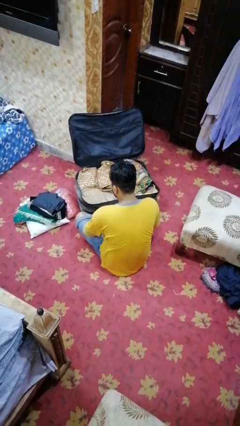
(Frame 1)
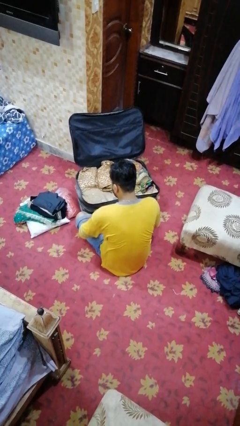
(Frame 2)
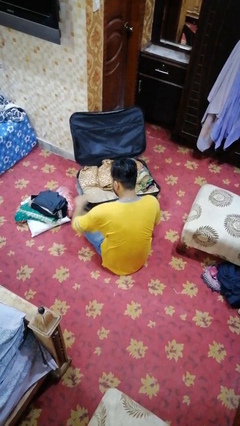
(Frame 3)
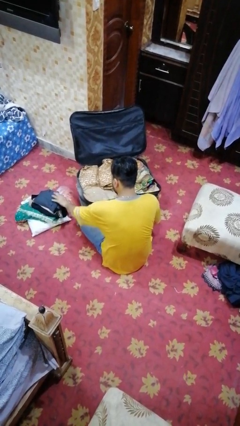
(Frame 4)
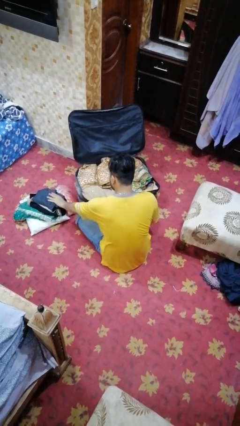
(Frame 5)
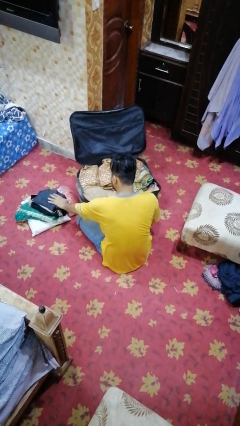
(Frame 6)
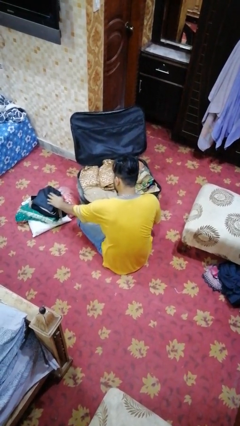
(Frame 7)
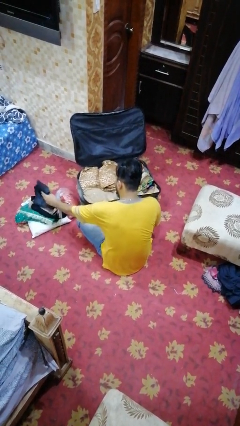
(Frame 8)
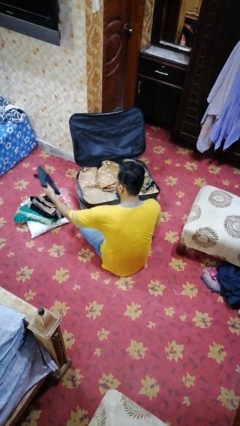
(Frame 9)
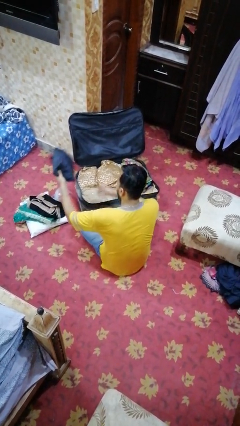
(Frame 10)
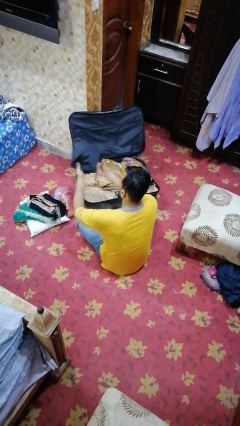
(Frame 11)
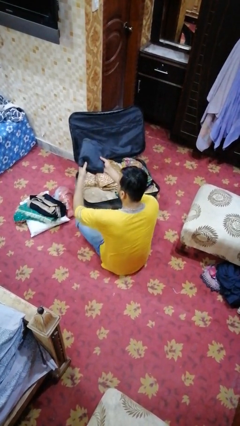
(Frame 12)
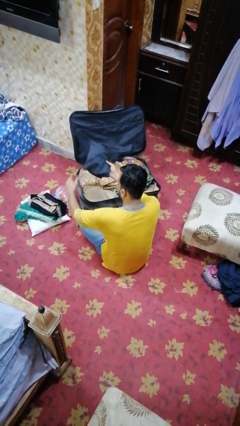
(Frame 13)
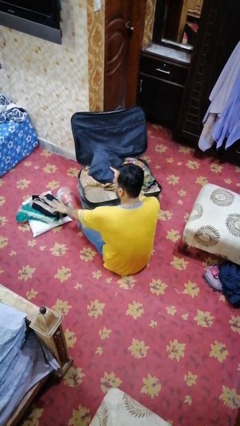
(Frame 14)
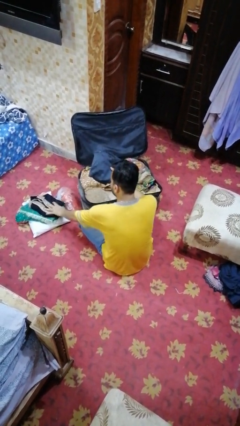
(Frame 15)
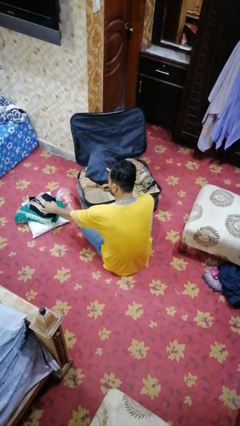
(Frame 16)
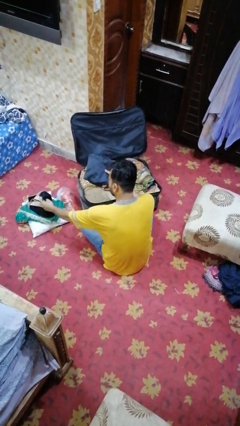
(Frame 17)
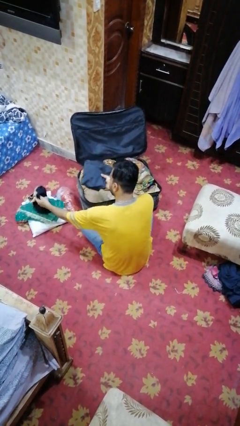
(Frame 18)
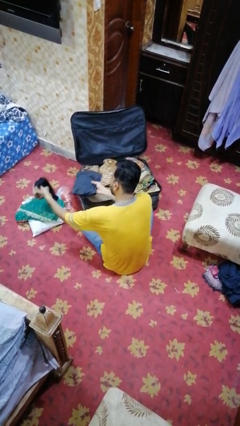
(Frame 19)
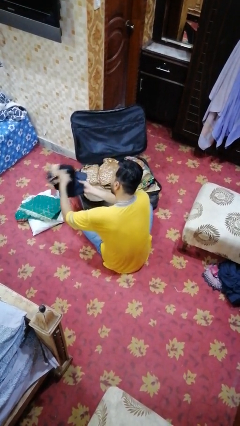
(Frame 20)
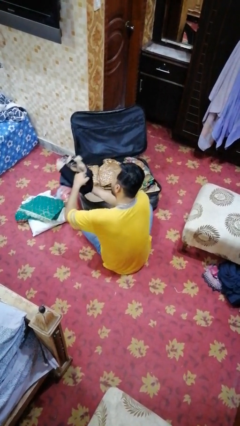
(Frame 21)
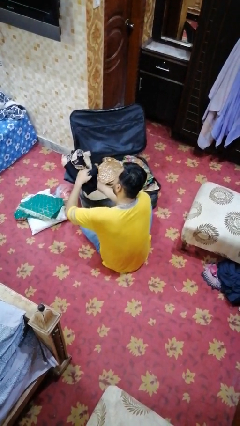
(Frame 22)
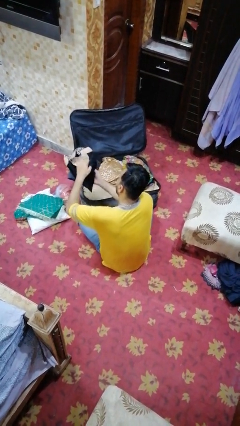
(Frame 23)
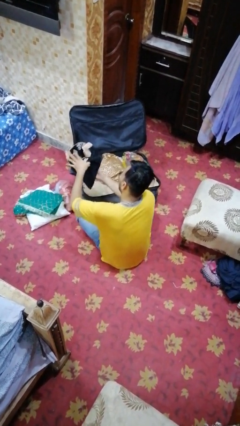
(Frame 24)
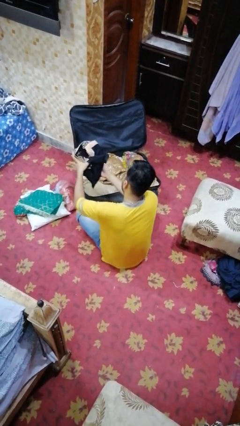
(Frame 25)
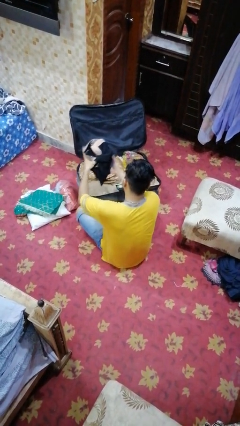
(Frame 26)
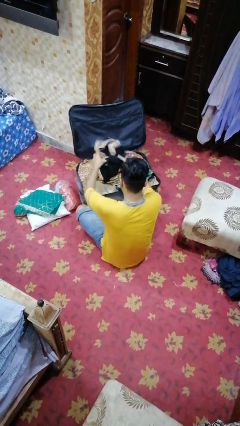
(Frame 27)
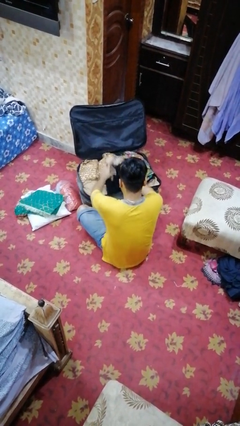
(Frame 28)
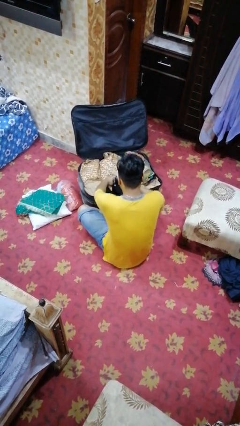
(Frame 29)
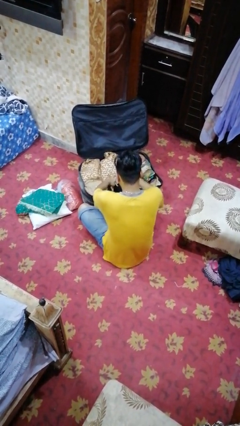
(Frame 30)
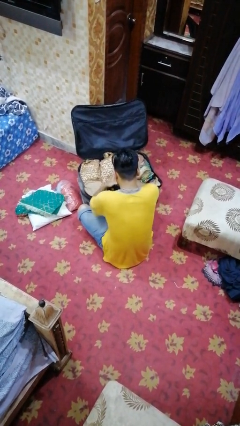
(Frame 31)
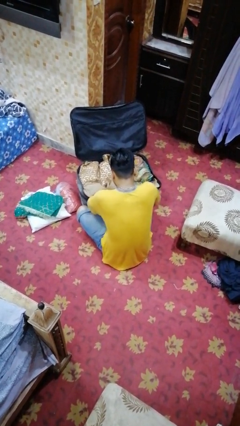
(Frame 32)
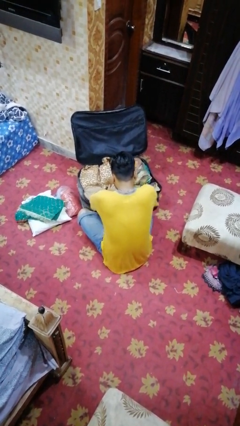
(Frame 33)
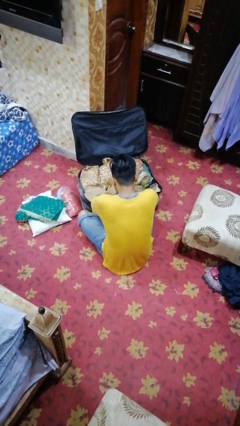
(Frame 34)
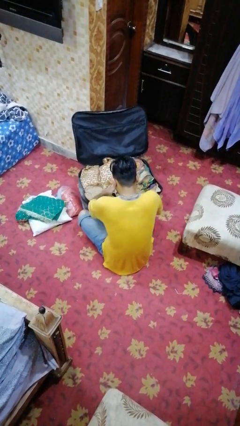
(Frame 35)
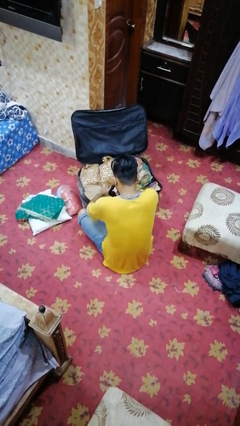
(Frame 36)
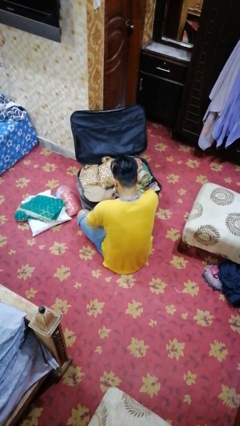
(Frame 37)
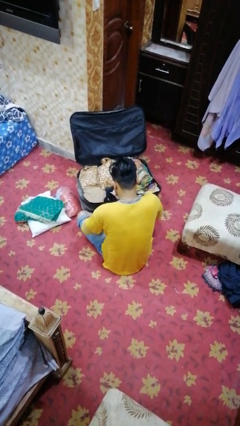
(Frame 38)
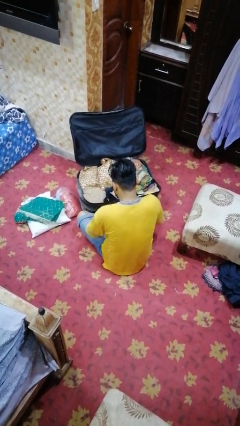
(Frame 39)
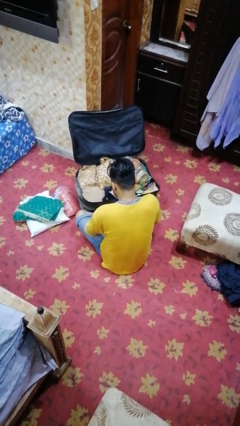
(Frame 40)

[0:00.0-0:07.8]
person loads clothes into suitcase

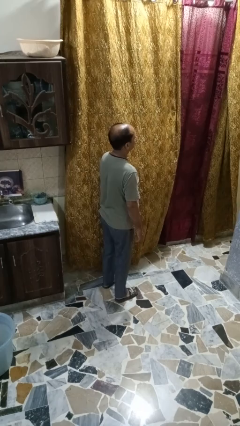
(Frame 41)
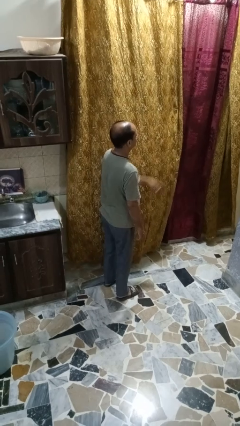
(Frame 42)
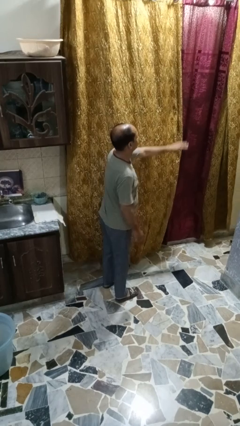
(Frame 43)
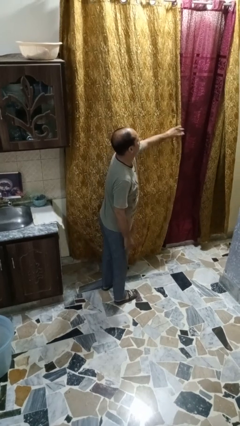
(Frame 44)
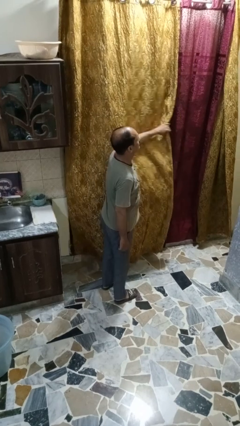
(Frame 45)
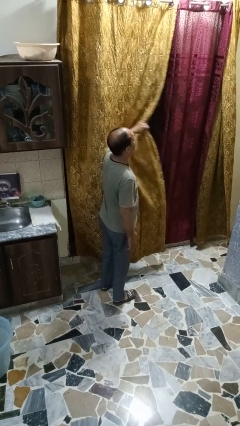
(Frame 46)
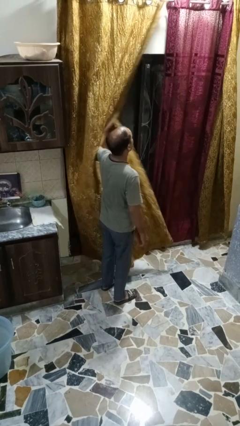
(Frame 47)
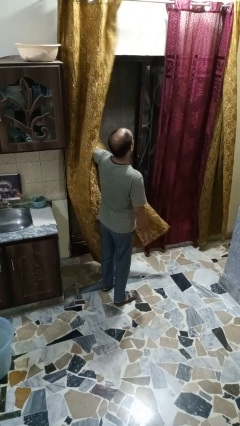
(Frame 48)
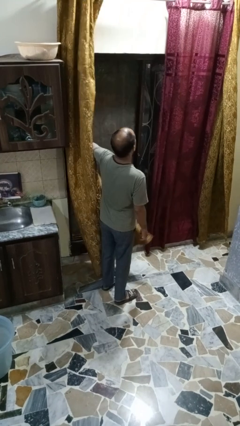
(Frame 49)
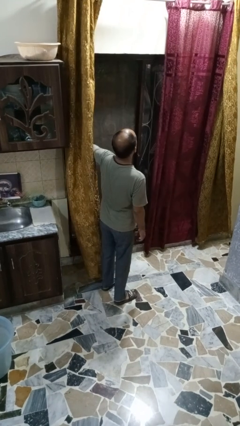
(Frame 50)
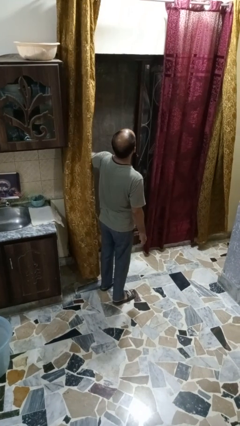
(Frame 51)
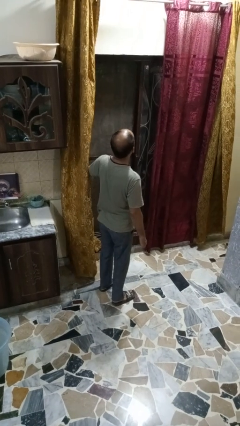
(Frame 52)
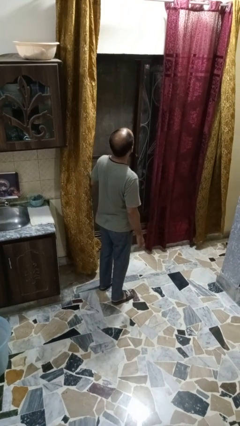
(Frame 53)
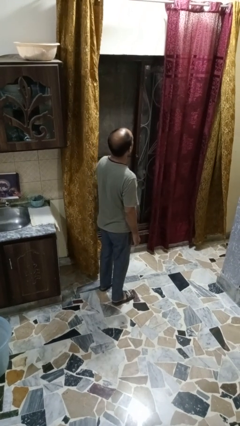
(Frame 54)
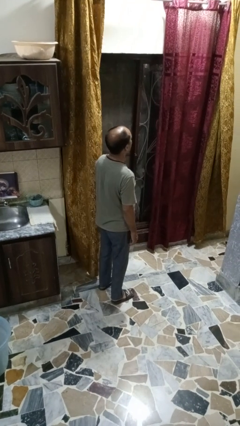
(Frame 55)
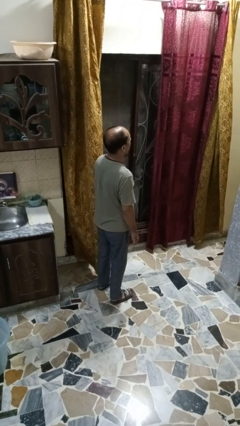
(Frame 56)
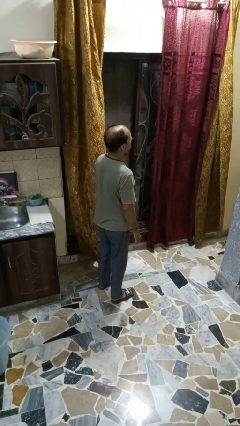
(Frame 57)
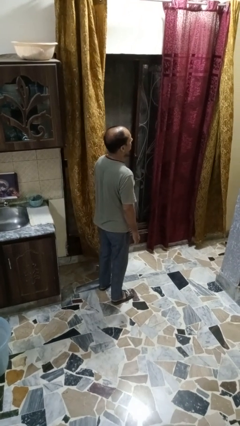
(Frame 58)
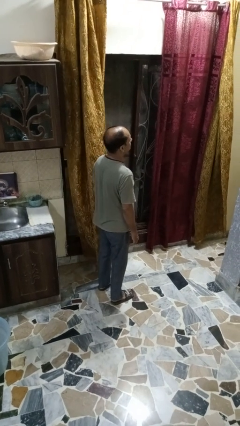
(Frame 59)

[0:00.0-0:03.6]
person opens curtains

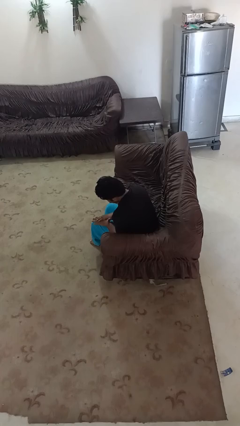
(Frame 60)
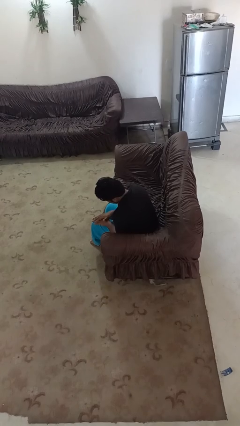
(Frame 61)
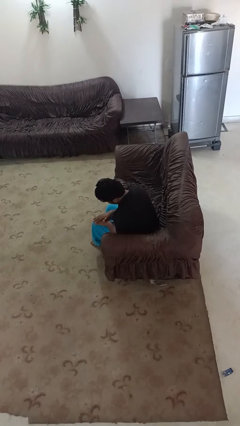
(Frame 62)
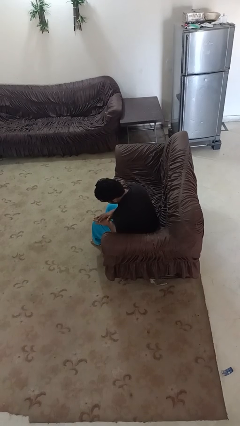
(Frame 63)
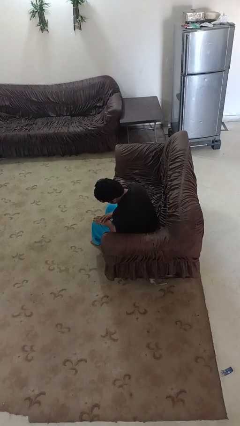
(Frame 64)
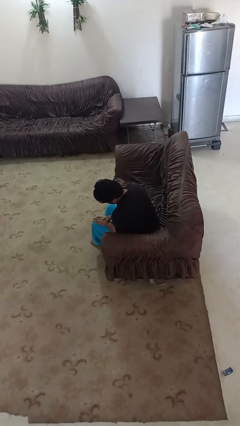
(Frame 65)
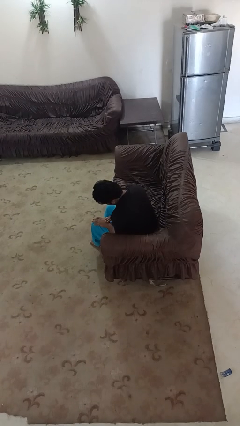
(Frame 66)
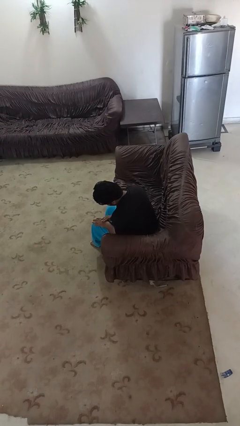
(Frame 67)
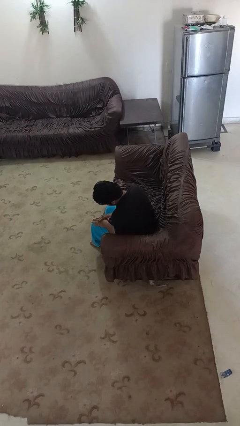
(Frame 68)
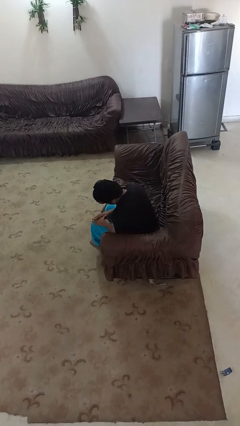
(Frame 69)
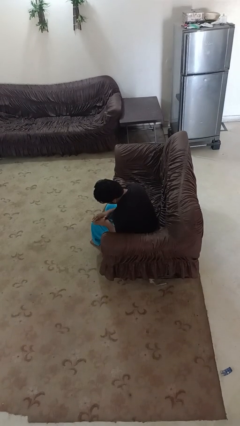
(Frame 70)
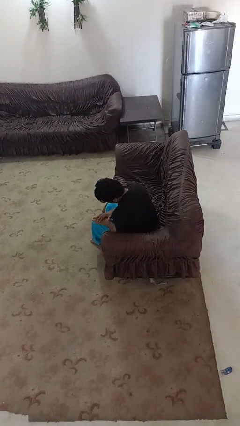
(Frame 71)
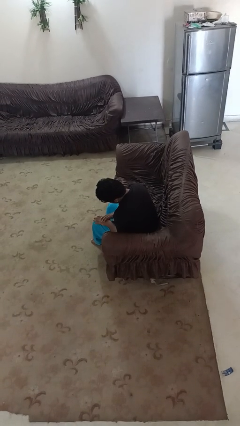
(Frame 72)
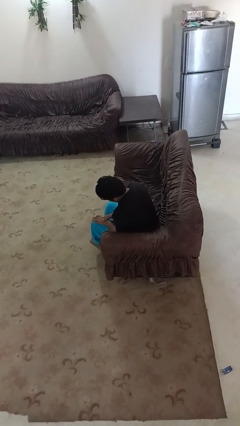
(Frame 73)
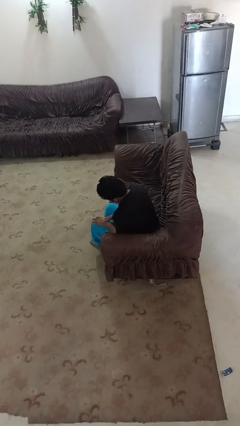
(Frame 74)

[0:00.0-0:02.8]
person looks at hands in lap

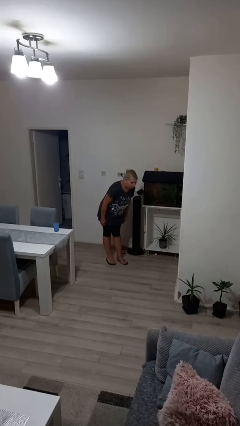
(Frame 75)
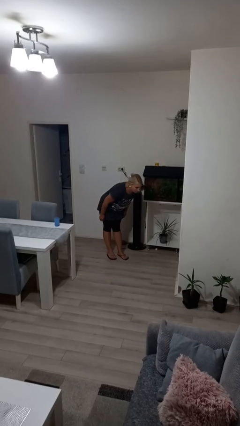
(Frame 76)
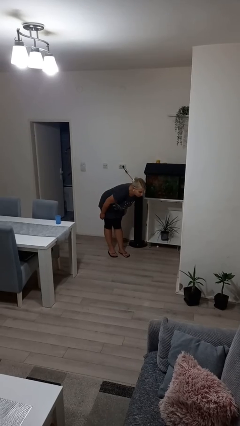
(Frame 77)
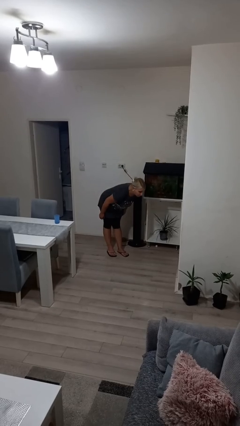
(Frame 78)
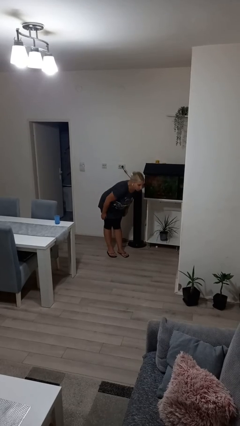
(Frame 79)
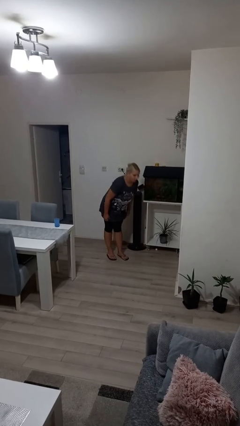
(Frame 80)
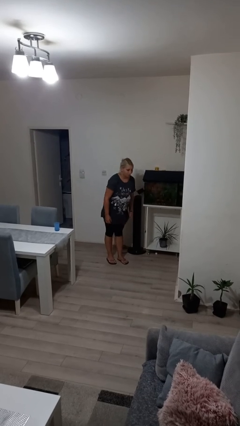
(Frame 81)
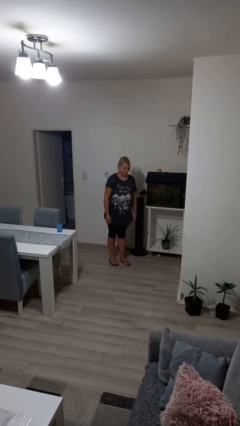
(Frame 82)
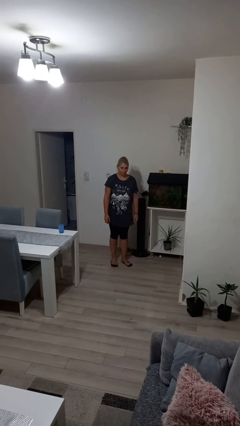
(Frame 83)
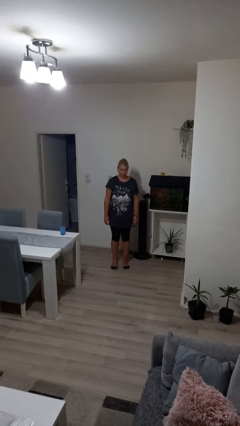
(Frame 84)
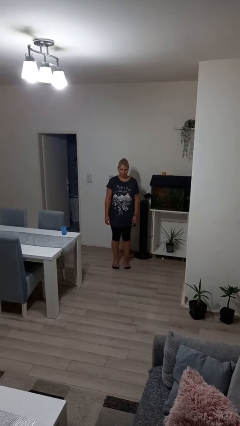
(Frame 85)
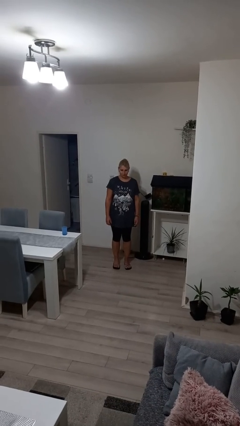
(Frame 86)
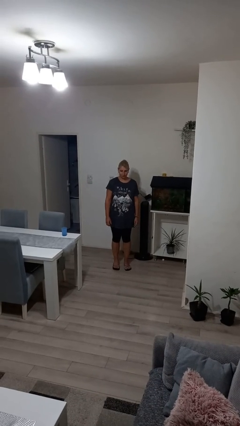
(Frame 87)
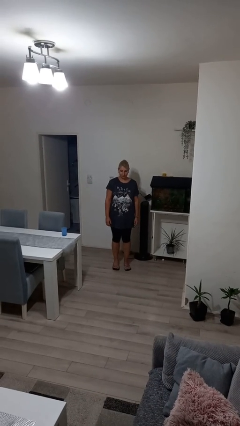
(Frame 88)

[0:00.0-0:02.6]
person bows

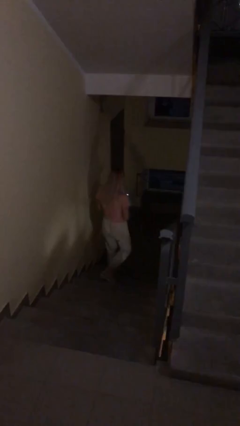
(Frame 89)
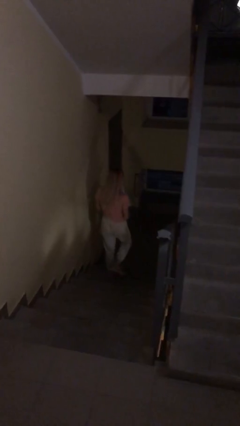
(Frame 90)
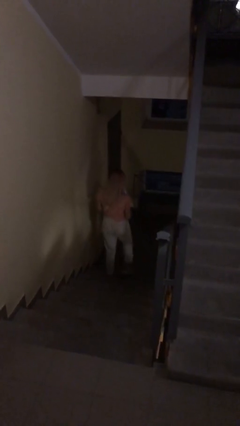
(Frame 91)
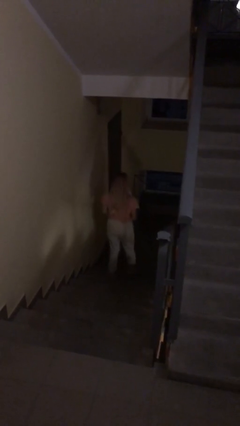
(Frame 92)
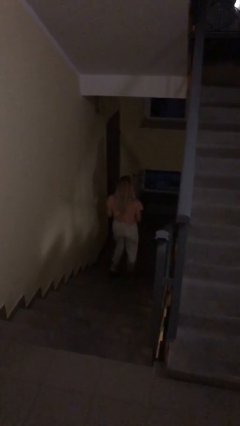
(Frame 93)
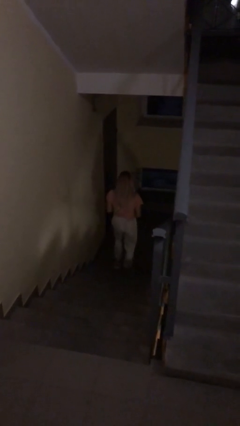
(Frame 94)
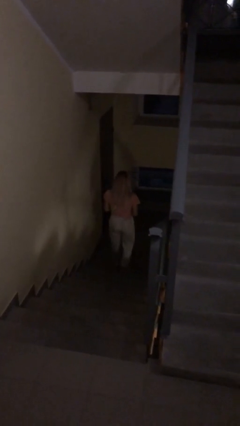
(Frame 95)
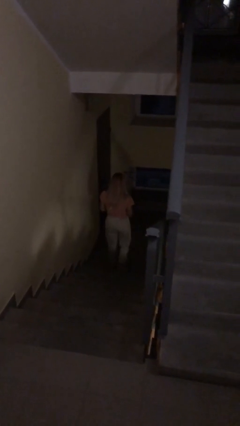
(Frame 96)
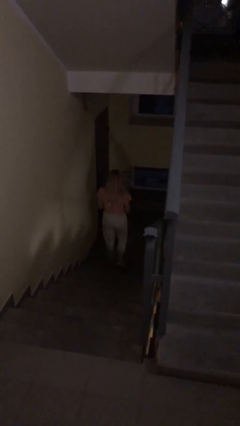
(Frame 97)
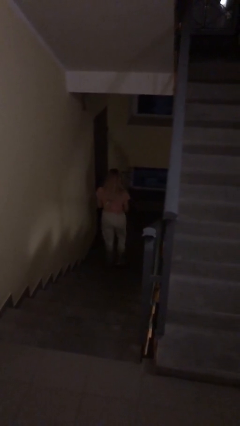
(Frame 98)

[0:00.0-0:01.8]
person climbs down stairs
